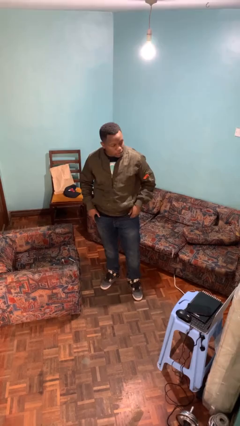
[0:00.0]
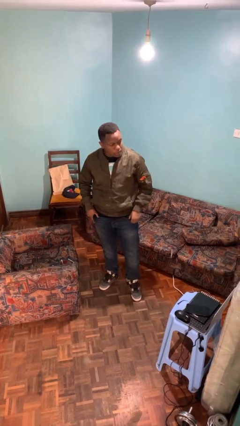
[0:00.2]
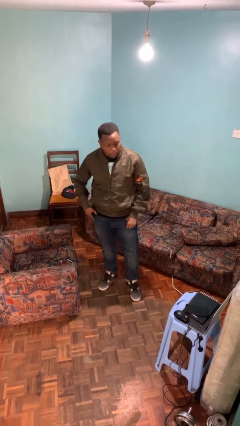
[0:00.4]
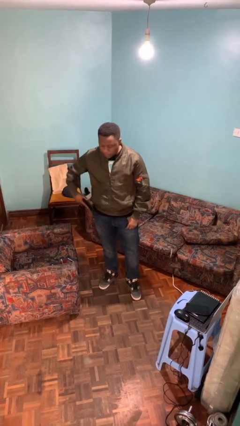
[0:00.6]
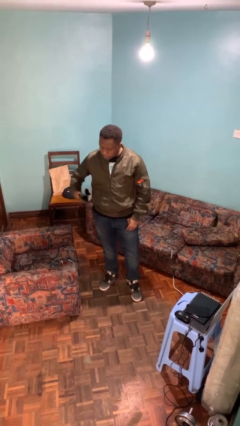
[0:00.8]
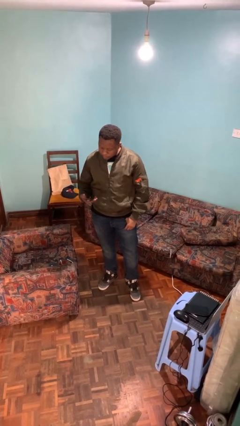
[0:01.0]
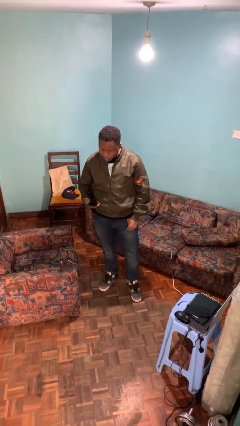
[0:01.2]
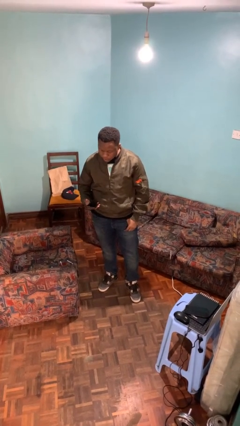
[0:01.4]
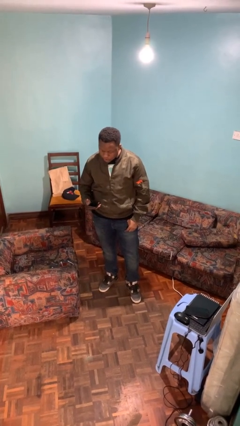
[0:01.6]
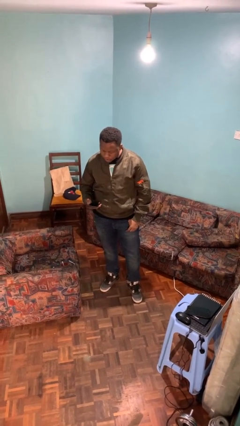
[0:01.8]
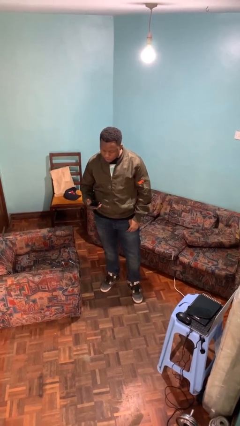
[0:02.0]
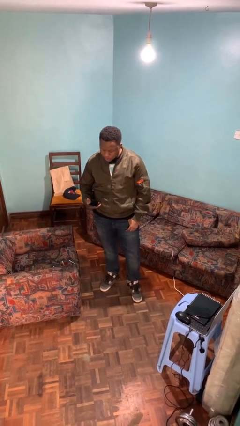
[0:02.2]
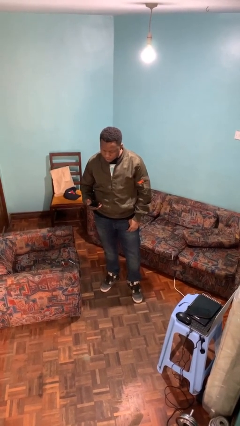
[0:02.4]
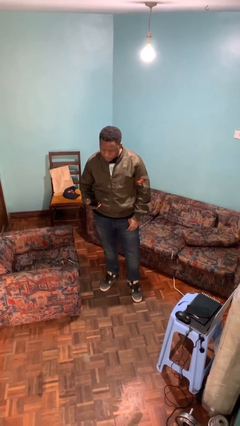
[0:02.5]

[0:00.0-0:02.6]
person takes phone from pocket

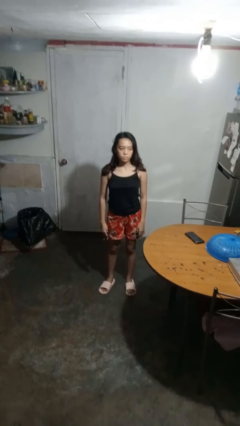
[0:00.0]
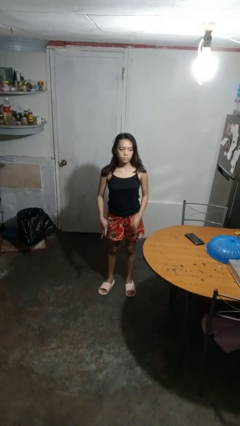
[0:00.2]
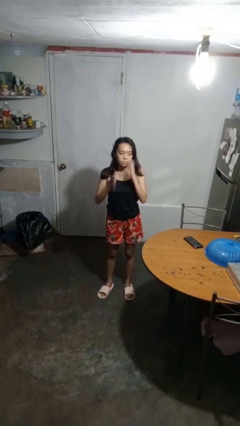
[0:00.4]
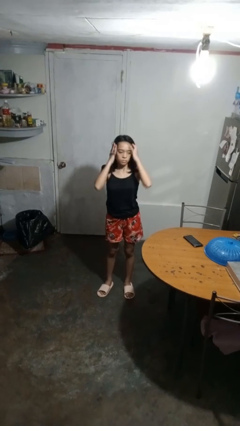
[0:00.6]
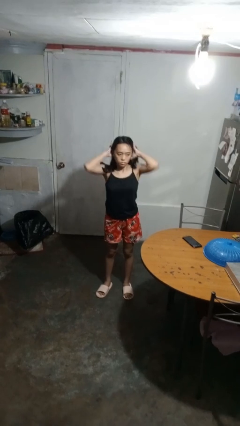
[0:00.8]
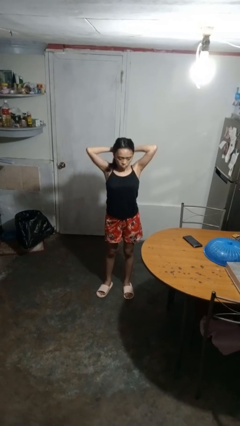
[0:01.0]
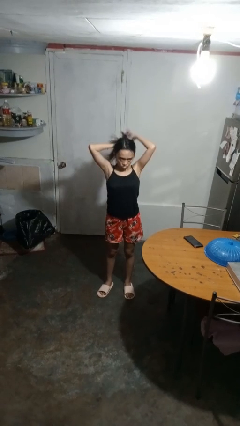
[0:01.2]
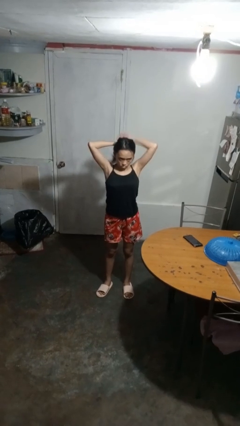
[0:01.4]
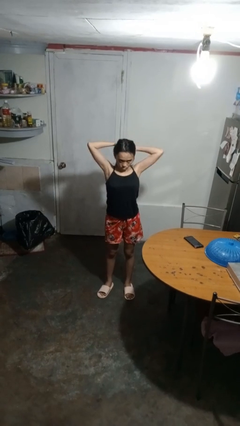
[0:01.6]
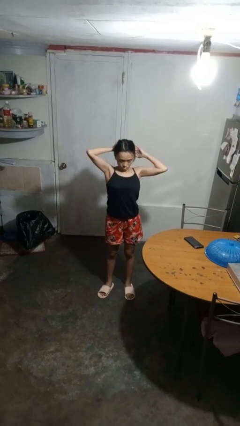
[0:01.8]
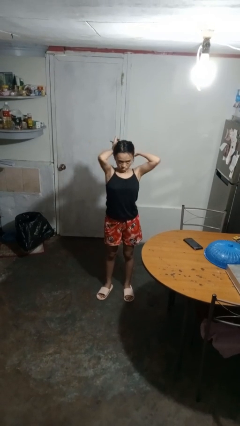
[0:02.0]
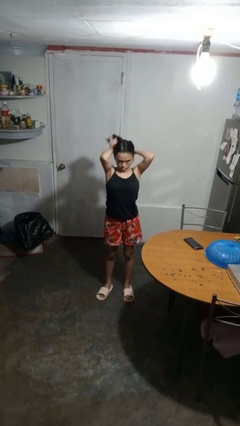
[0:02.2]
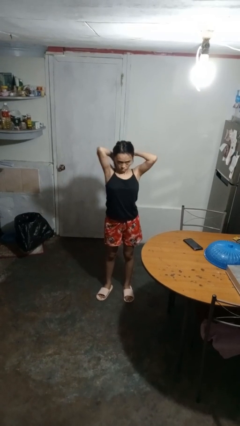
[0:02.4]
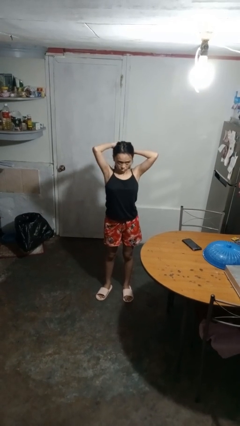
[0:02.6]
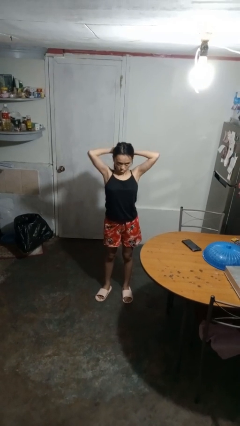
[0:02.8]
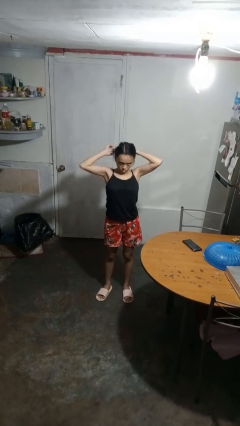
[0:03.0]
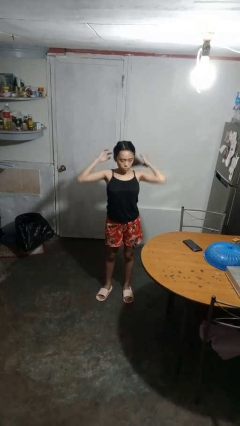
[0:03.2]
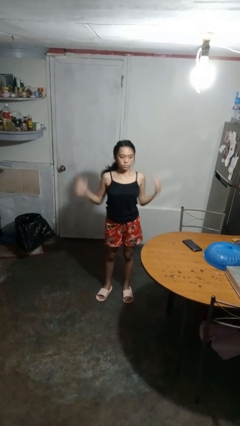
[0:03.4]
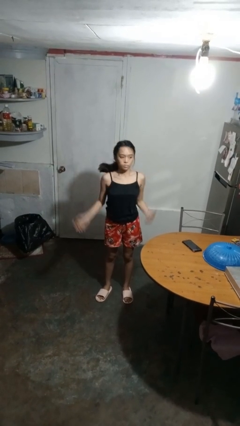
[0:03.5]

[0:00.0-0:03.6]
person puts hair in ponytail

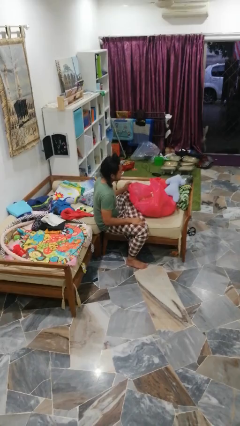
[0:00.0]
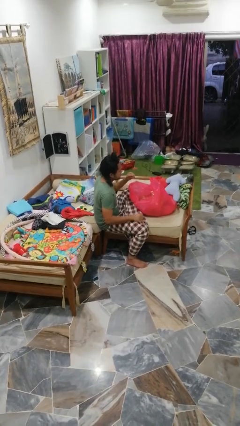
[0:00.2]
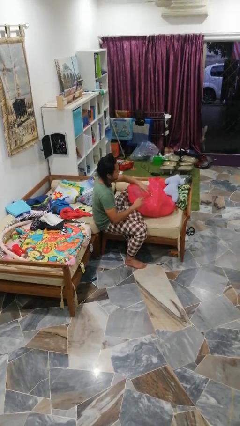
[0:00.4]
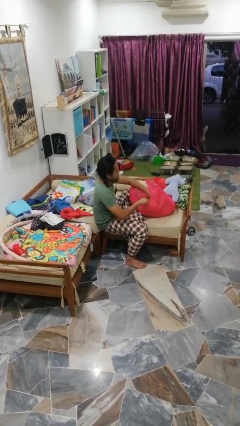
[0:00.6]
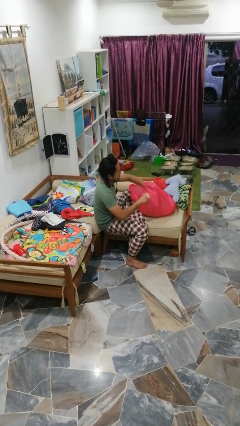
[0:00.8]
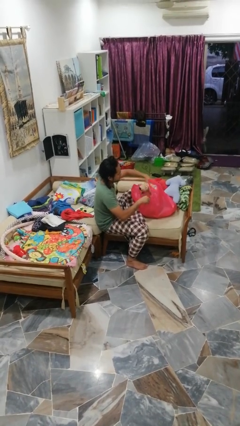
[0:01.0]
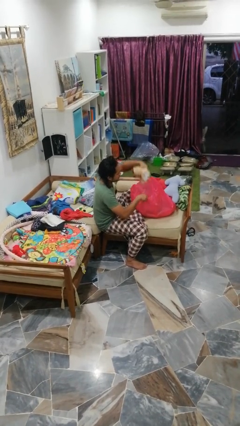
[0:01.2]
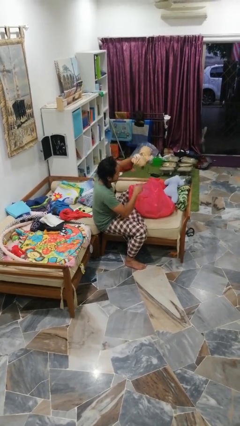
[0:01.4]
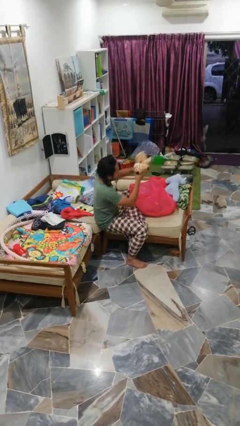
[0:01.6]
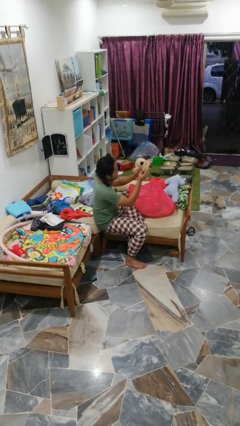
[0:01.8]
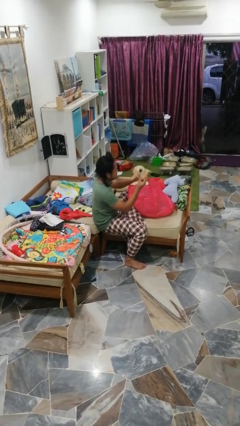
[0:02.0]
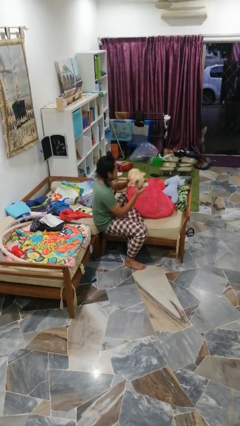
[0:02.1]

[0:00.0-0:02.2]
person takes object from bag

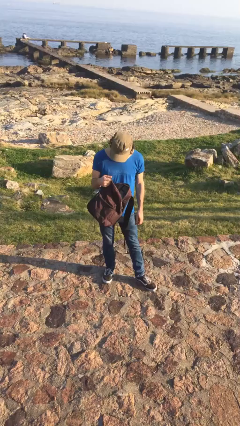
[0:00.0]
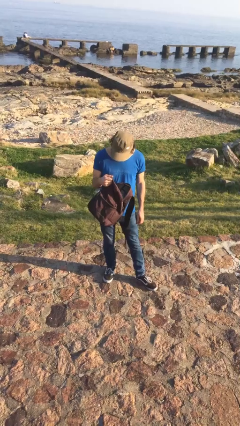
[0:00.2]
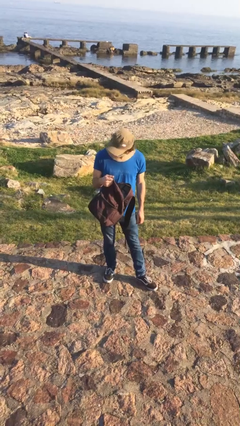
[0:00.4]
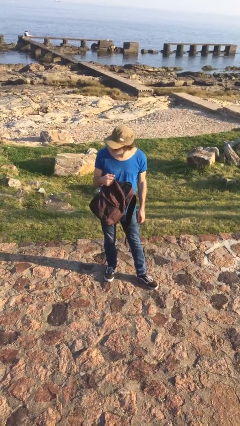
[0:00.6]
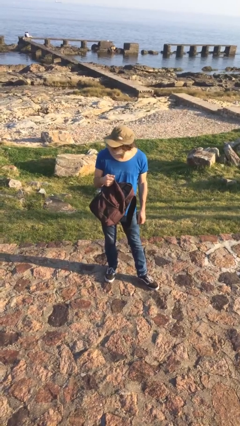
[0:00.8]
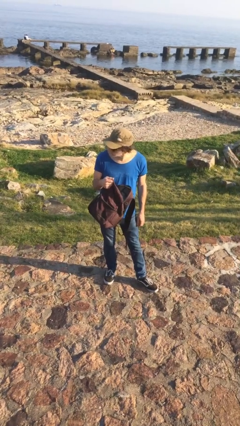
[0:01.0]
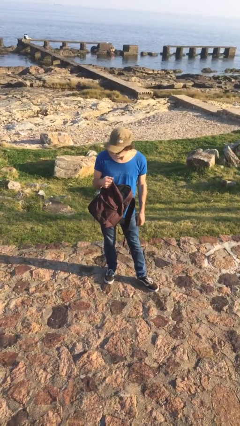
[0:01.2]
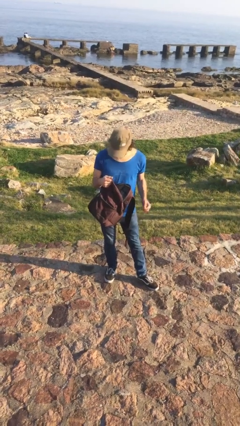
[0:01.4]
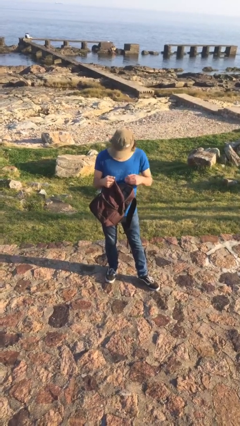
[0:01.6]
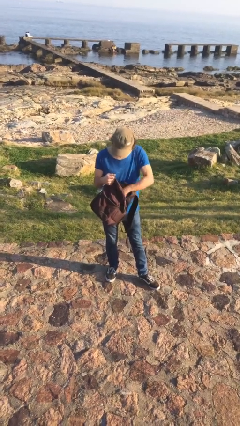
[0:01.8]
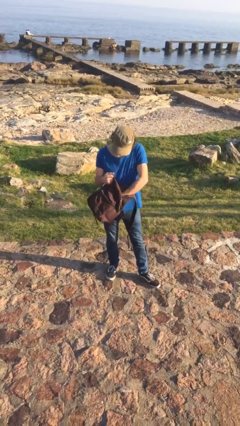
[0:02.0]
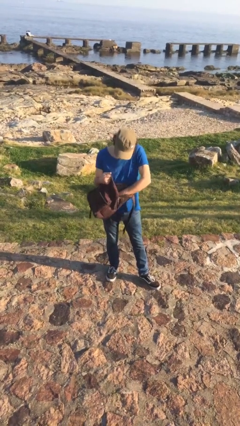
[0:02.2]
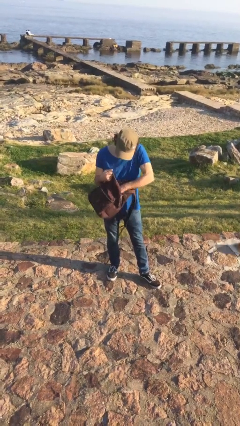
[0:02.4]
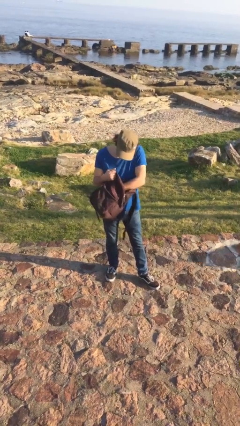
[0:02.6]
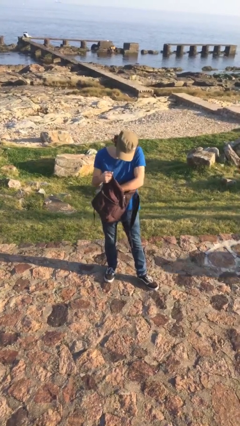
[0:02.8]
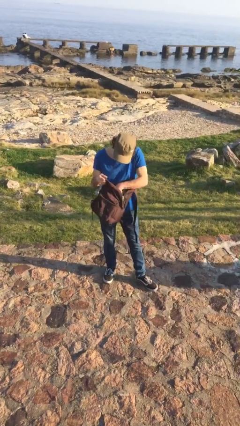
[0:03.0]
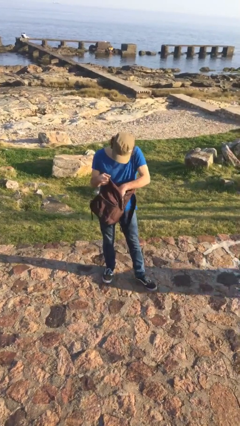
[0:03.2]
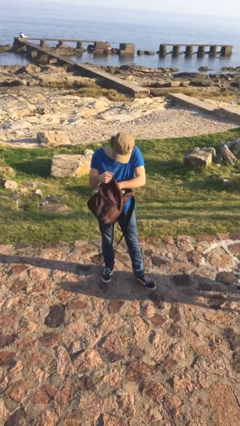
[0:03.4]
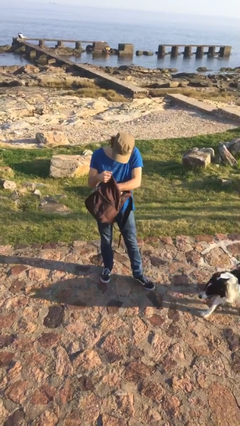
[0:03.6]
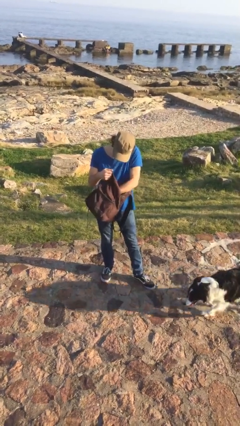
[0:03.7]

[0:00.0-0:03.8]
person searches in backpack

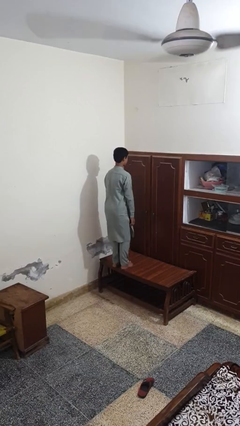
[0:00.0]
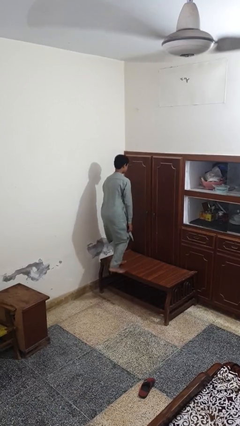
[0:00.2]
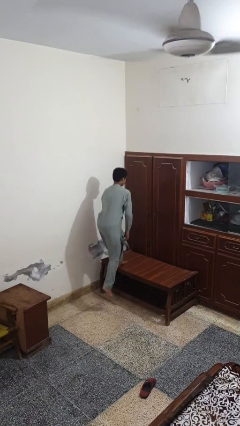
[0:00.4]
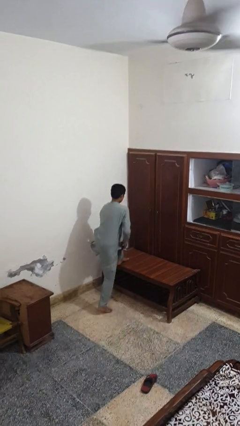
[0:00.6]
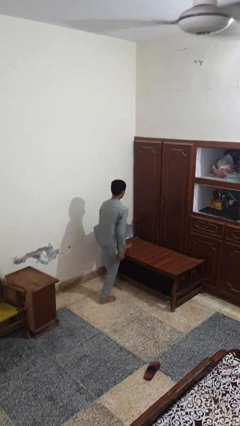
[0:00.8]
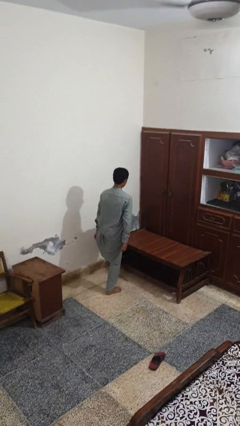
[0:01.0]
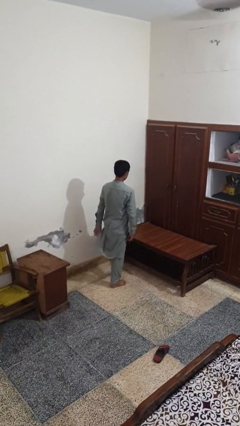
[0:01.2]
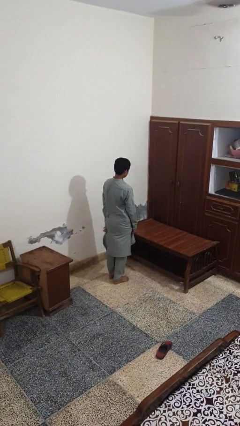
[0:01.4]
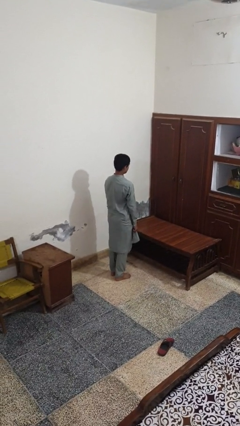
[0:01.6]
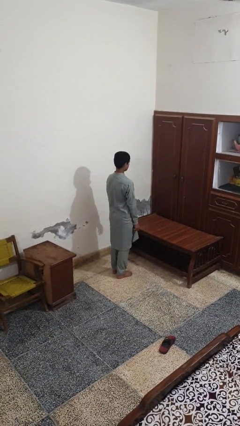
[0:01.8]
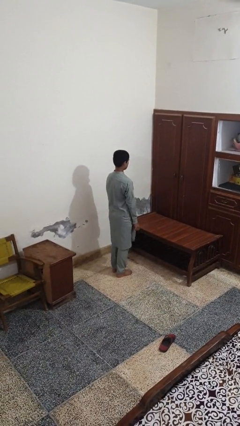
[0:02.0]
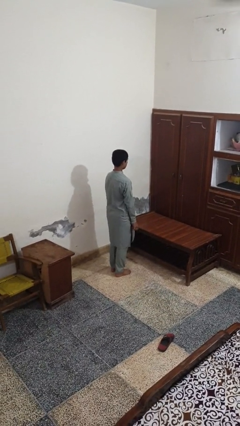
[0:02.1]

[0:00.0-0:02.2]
person climbs off table

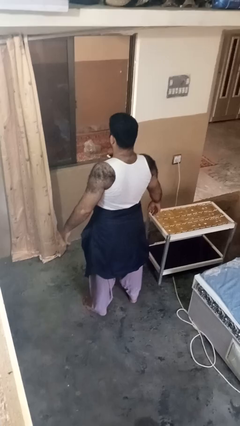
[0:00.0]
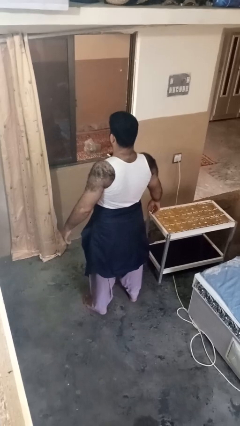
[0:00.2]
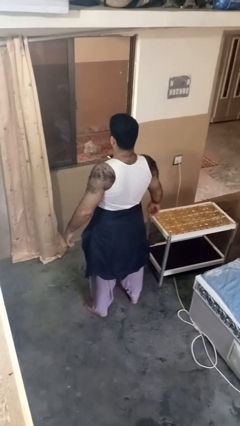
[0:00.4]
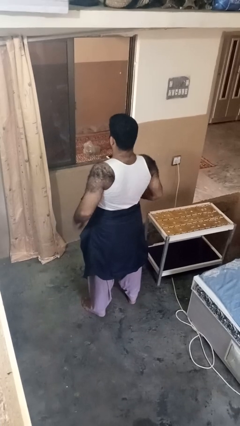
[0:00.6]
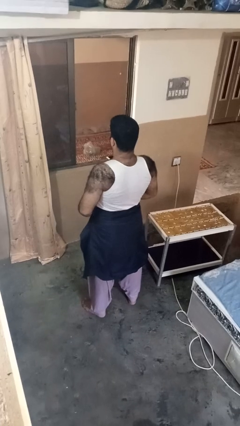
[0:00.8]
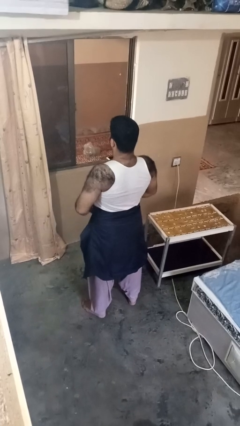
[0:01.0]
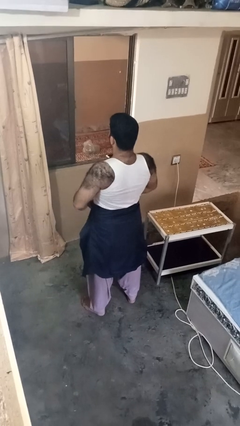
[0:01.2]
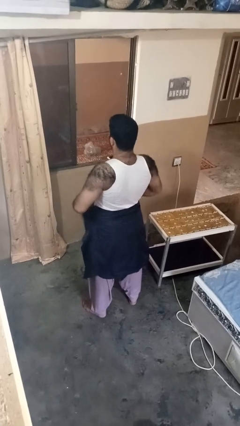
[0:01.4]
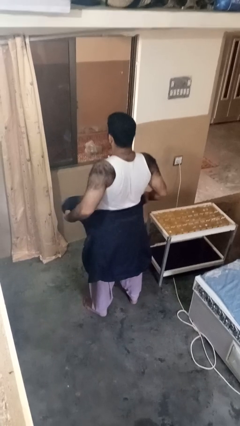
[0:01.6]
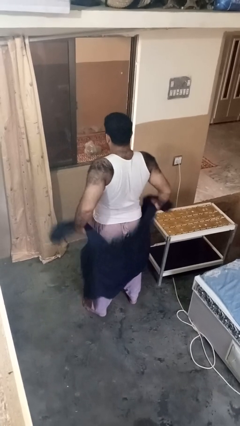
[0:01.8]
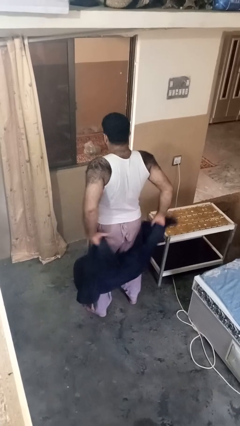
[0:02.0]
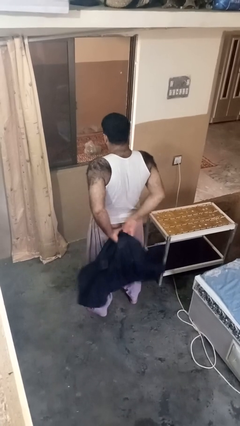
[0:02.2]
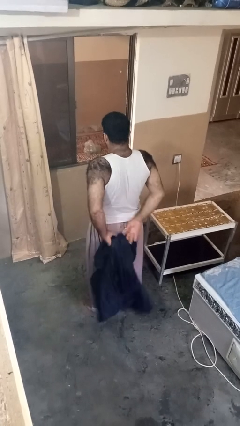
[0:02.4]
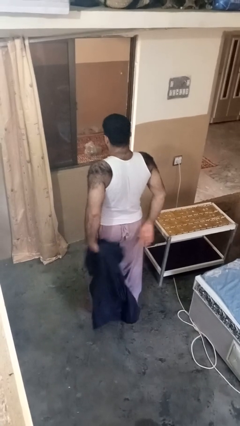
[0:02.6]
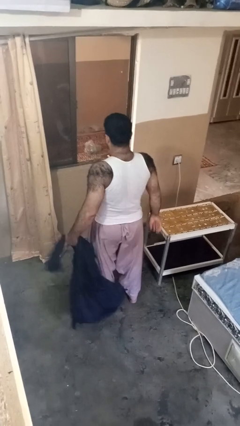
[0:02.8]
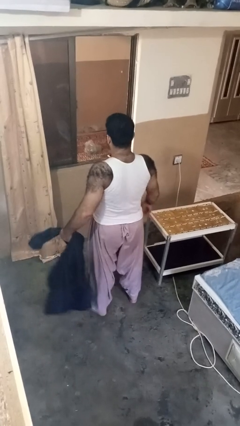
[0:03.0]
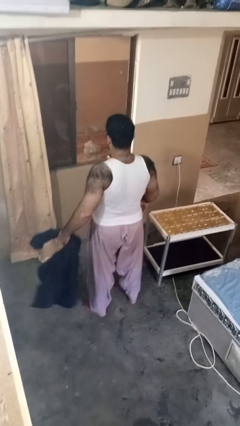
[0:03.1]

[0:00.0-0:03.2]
person unties jacket around waist

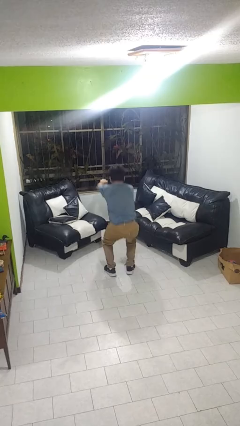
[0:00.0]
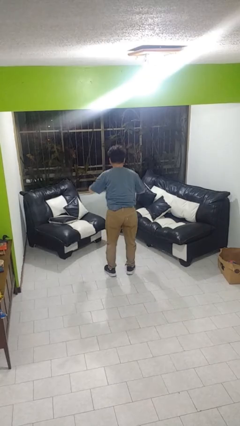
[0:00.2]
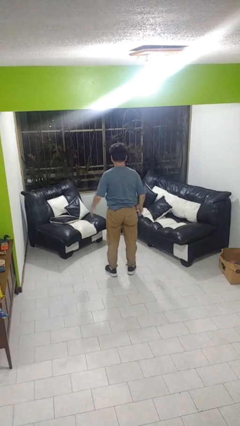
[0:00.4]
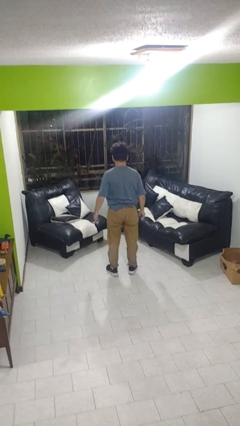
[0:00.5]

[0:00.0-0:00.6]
person stands up
